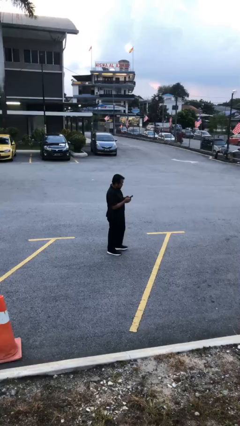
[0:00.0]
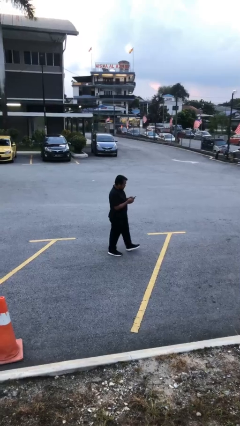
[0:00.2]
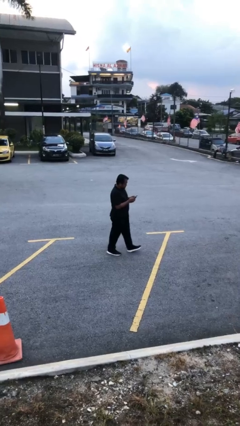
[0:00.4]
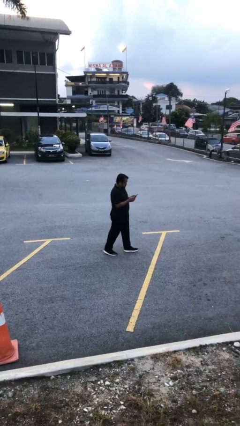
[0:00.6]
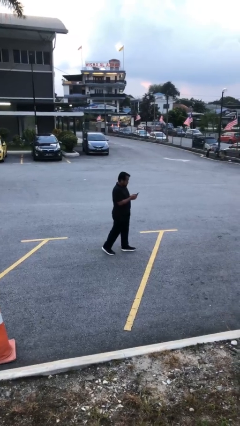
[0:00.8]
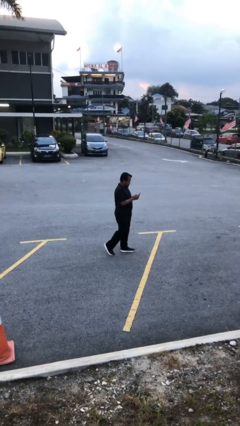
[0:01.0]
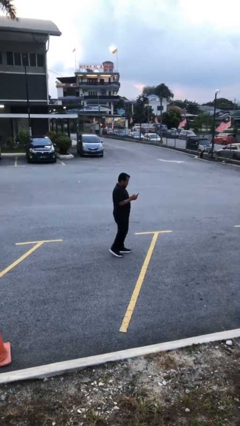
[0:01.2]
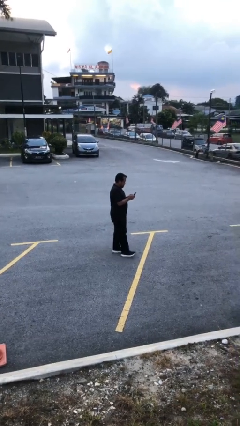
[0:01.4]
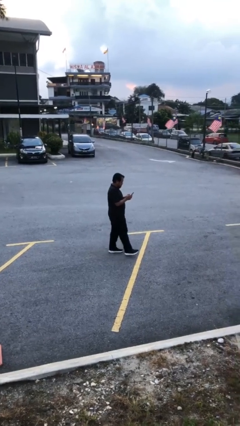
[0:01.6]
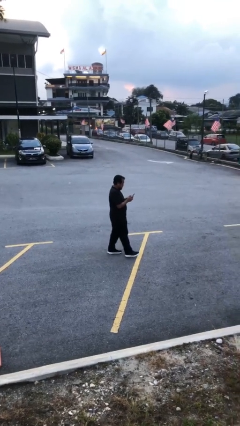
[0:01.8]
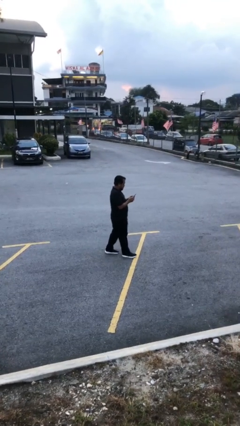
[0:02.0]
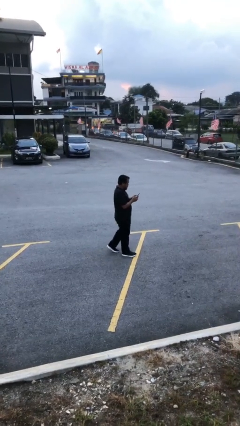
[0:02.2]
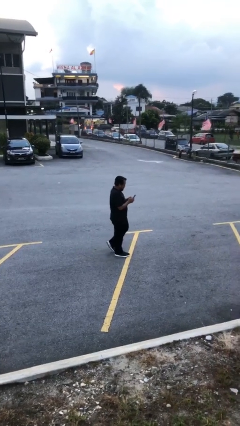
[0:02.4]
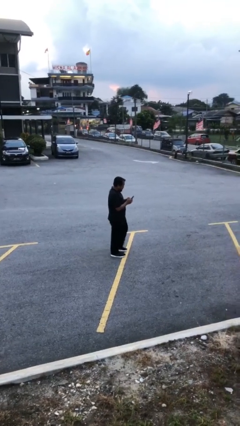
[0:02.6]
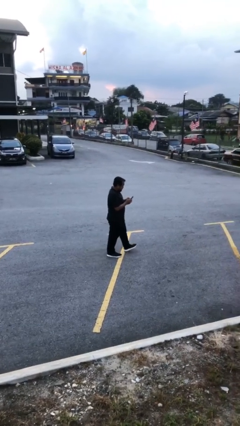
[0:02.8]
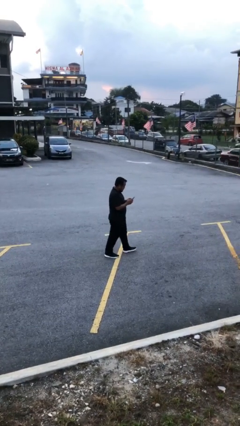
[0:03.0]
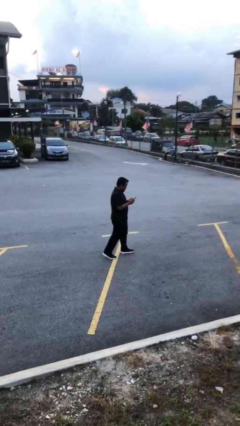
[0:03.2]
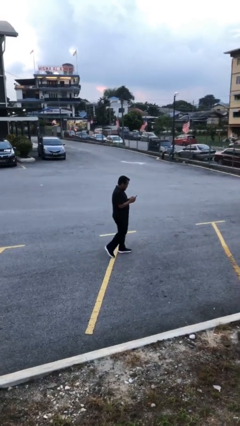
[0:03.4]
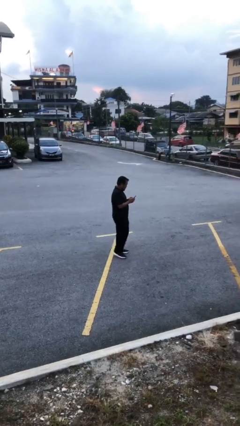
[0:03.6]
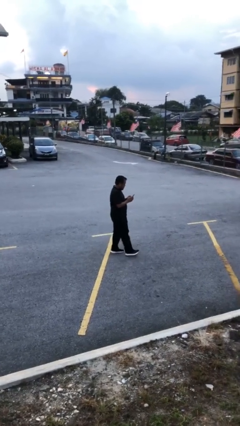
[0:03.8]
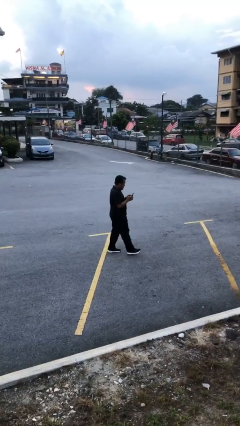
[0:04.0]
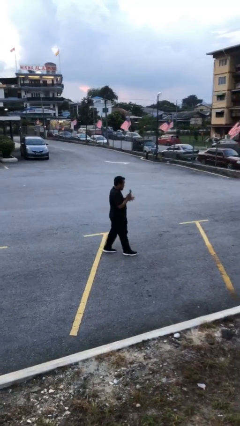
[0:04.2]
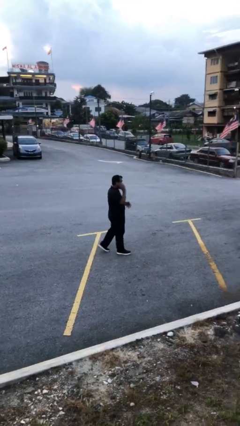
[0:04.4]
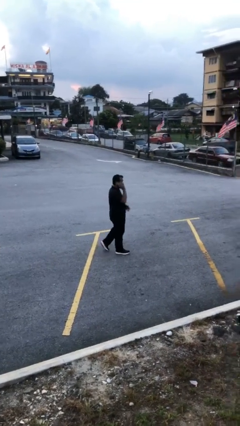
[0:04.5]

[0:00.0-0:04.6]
person texts on phone

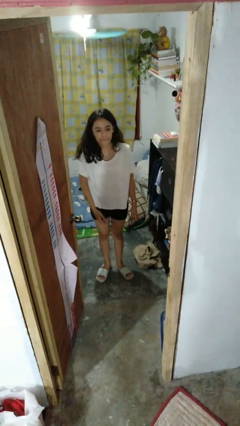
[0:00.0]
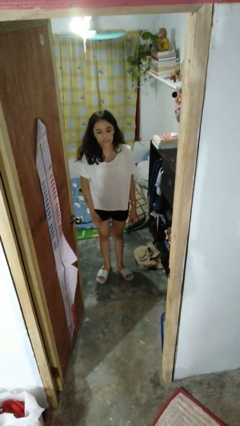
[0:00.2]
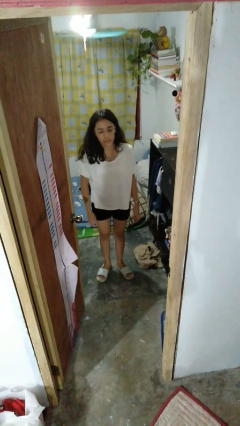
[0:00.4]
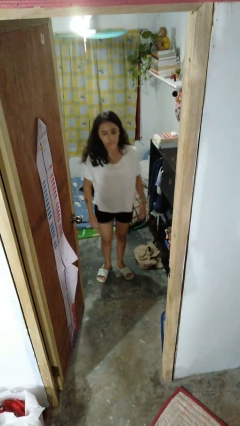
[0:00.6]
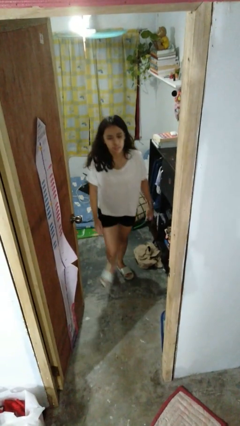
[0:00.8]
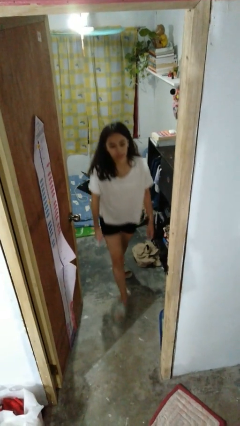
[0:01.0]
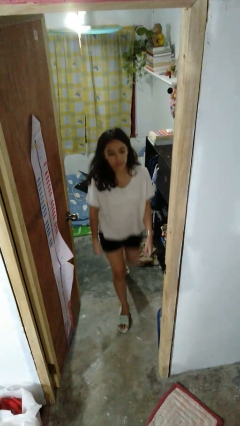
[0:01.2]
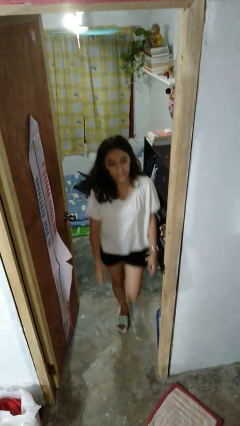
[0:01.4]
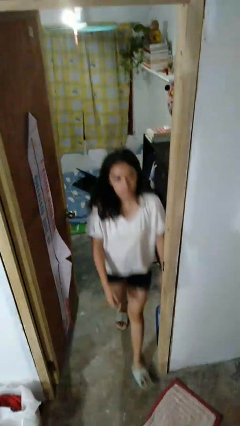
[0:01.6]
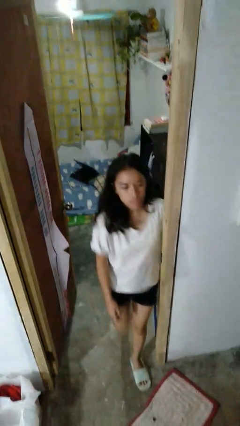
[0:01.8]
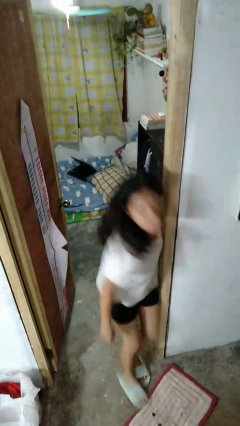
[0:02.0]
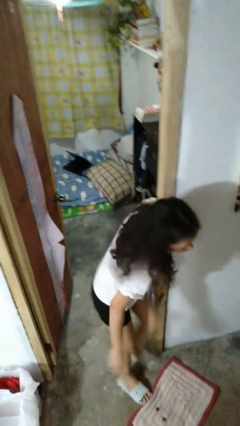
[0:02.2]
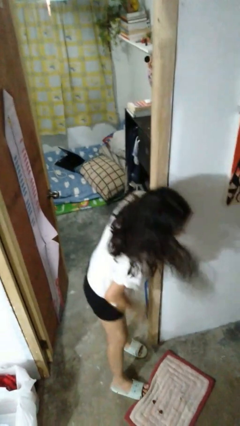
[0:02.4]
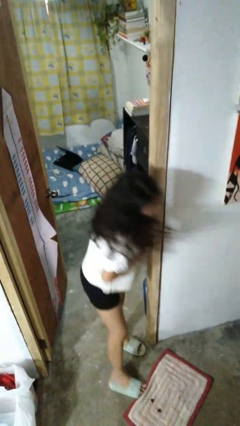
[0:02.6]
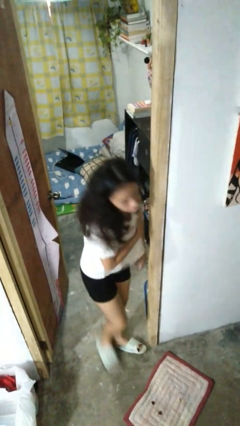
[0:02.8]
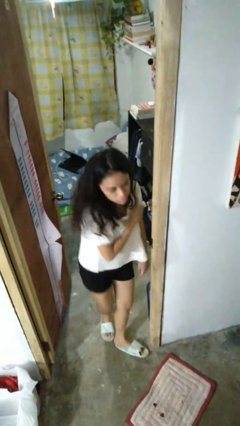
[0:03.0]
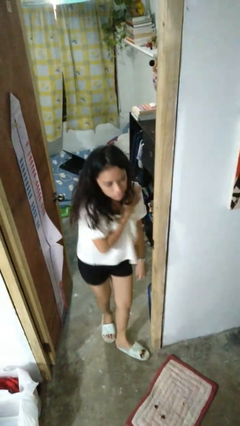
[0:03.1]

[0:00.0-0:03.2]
person bumps into wall

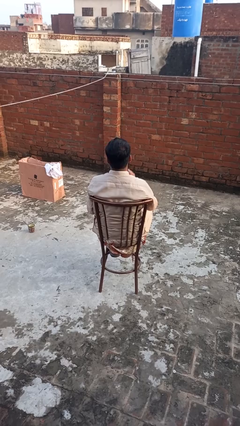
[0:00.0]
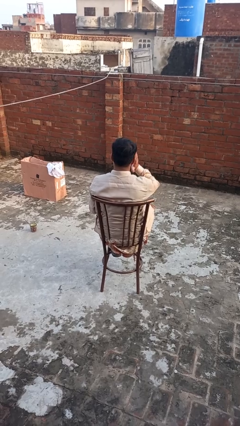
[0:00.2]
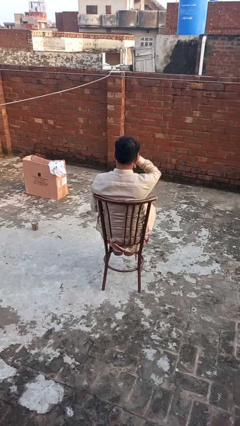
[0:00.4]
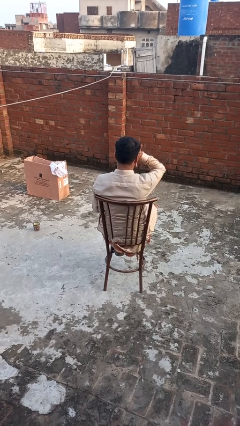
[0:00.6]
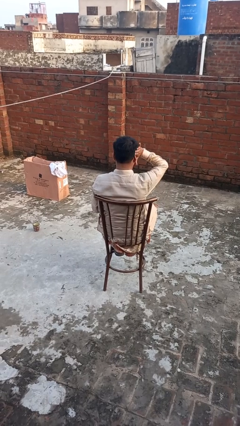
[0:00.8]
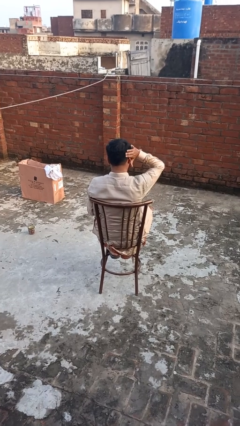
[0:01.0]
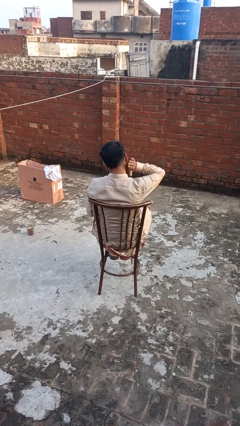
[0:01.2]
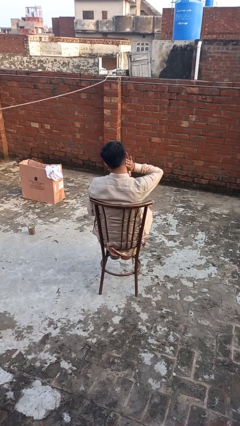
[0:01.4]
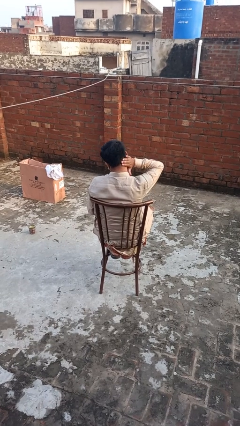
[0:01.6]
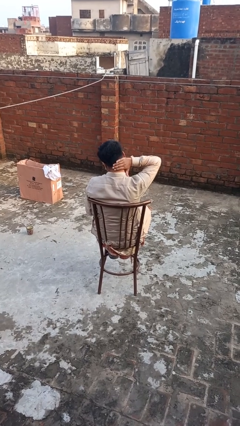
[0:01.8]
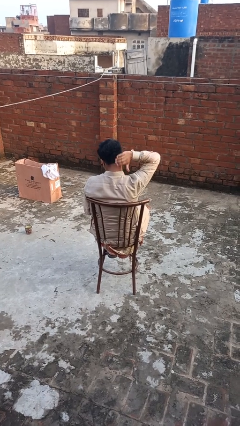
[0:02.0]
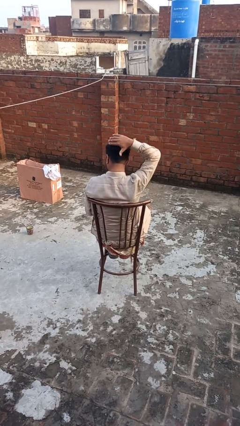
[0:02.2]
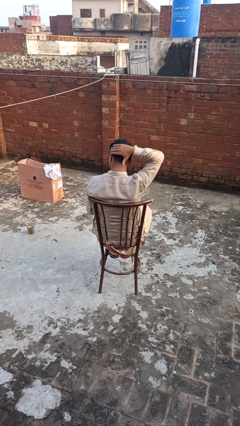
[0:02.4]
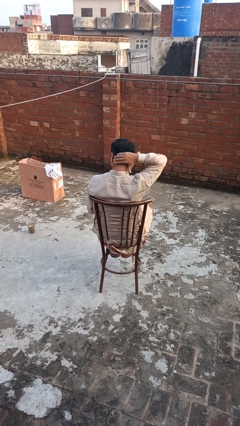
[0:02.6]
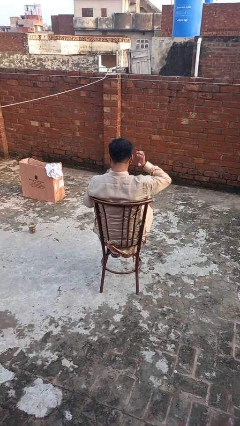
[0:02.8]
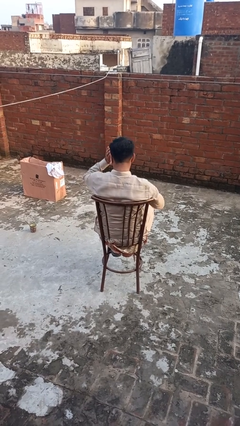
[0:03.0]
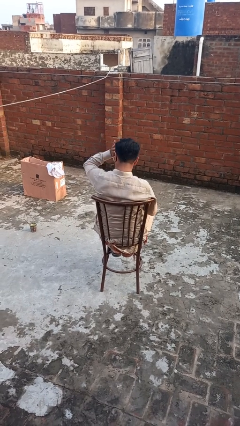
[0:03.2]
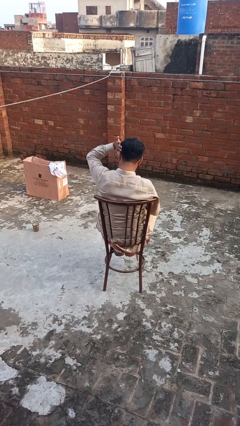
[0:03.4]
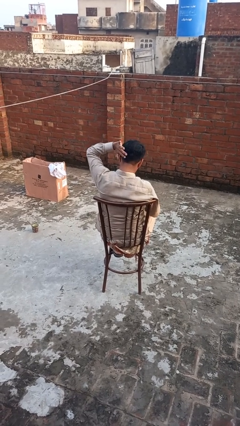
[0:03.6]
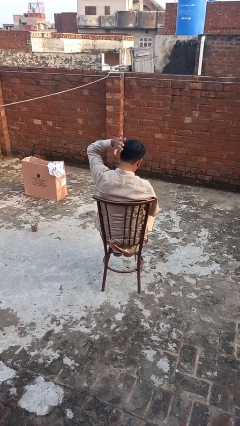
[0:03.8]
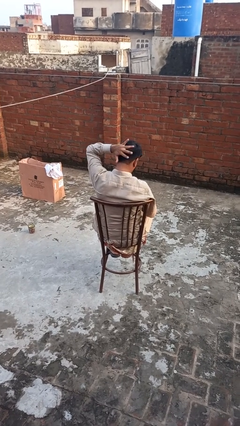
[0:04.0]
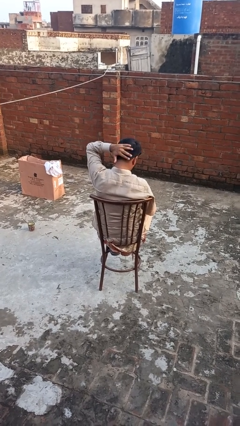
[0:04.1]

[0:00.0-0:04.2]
person strokes hair

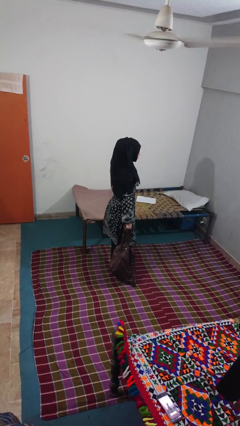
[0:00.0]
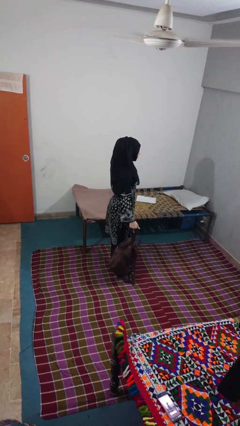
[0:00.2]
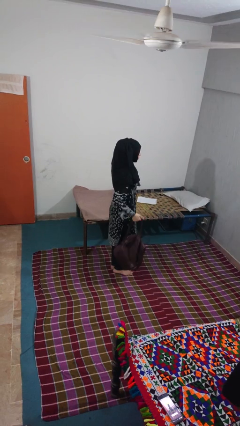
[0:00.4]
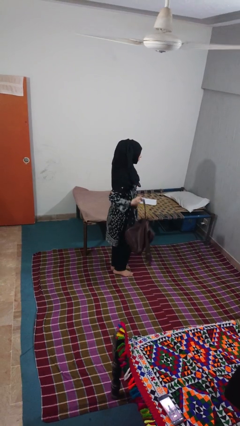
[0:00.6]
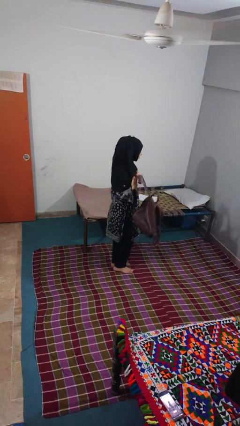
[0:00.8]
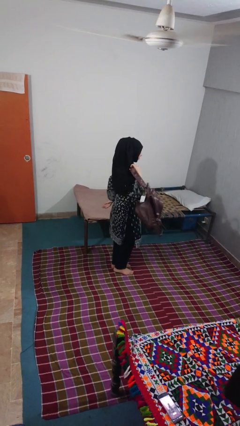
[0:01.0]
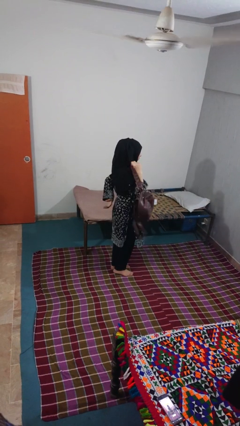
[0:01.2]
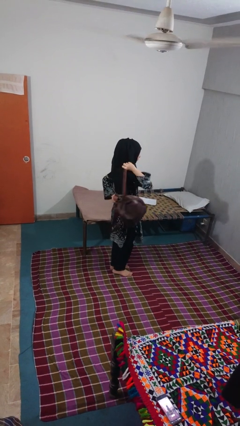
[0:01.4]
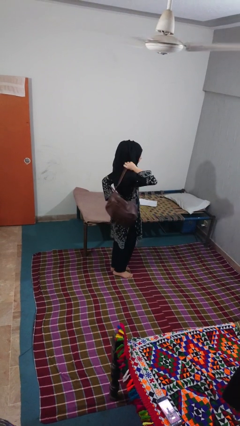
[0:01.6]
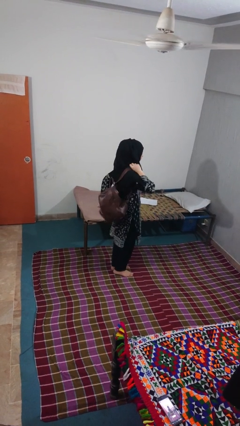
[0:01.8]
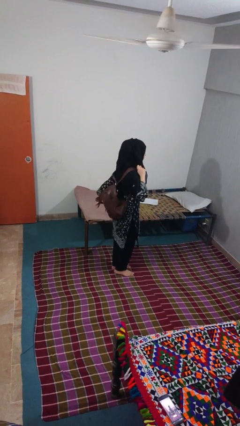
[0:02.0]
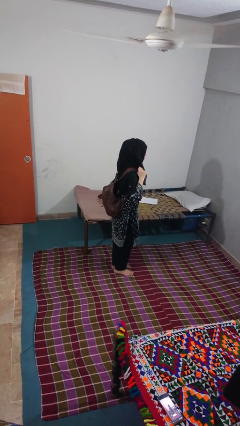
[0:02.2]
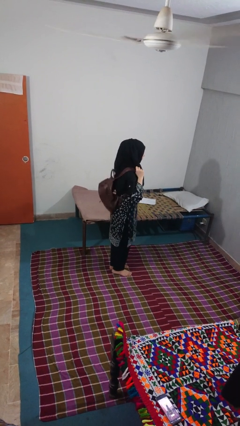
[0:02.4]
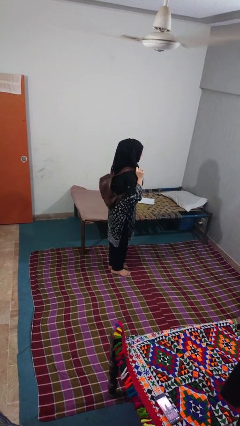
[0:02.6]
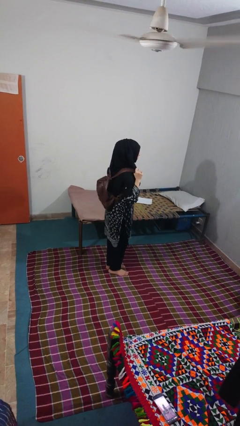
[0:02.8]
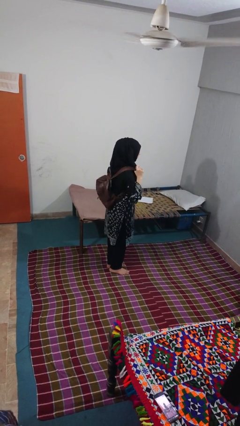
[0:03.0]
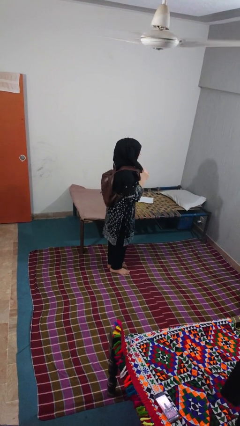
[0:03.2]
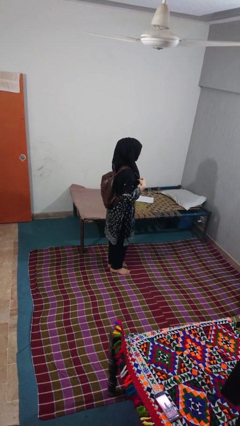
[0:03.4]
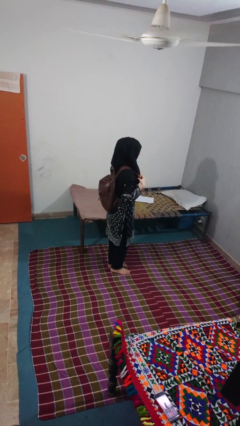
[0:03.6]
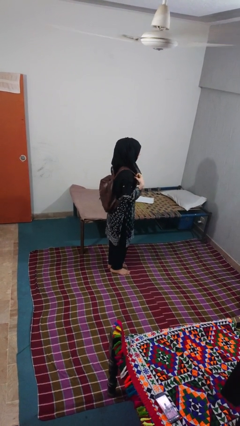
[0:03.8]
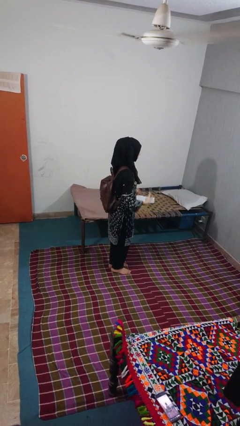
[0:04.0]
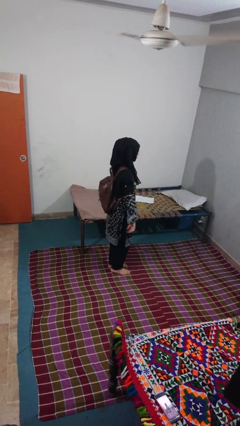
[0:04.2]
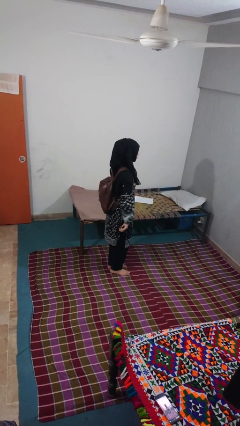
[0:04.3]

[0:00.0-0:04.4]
person puts on backpack

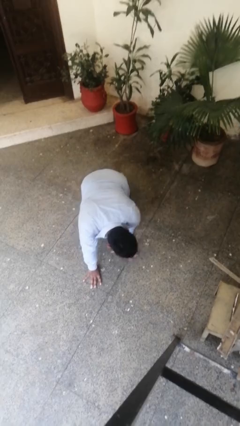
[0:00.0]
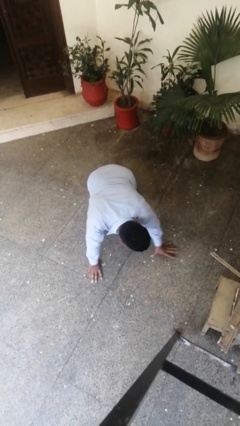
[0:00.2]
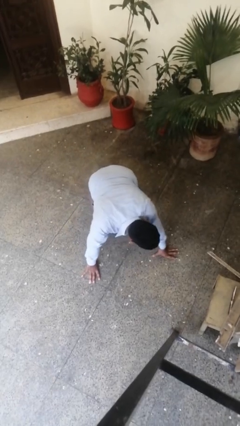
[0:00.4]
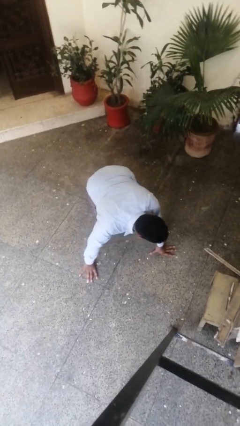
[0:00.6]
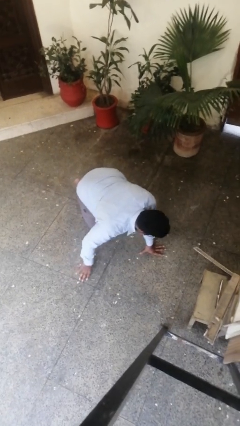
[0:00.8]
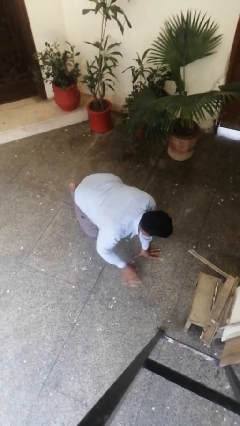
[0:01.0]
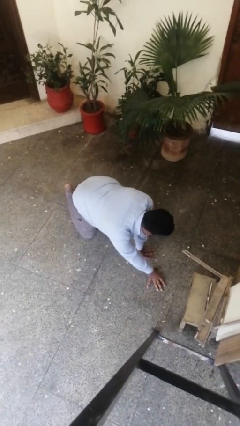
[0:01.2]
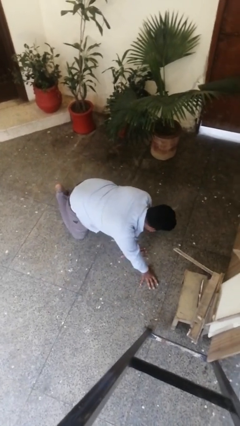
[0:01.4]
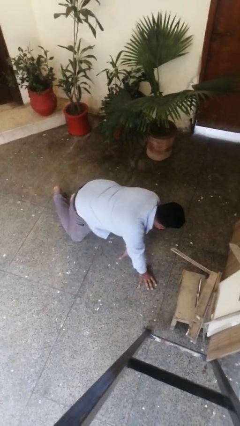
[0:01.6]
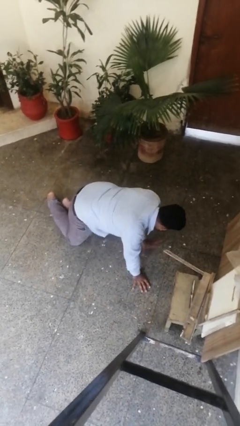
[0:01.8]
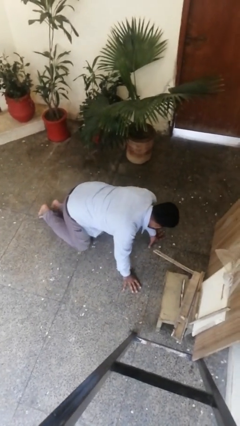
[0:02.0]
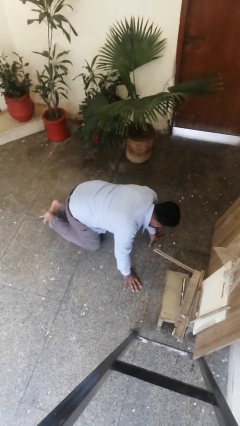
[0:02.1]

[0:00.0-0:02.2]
person crawls
